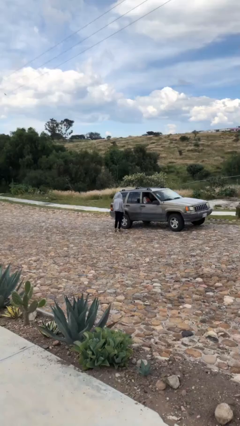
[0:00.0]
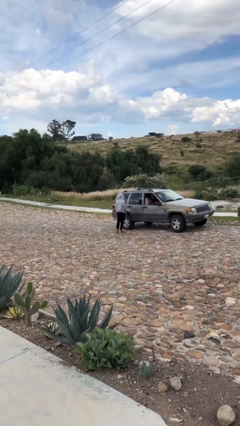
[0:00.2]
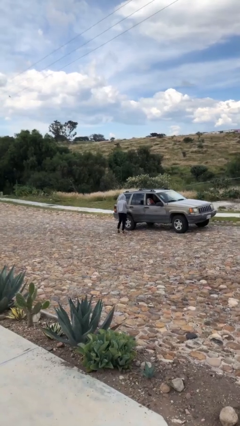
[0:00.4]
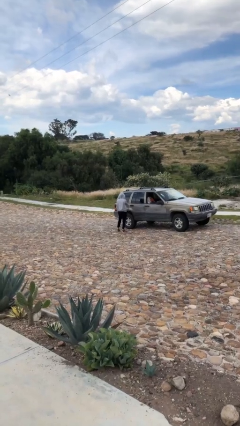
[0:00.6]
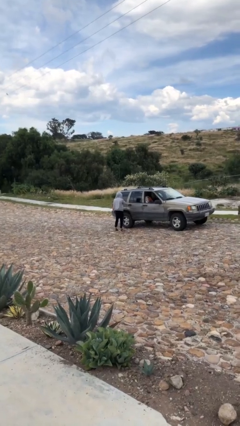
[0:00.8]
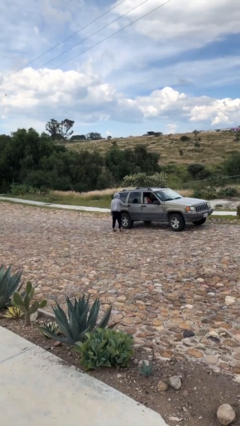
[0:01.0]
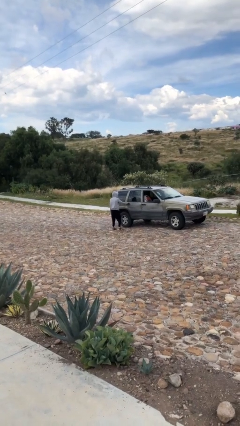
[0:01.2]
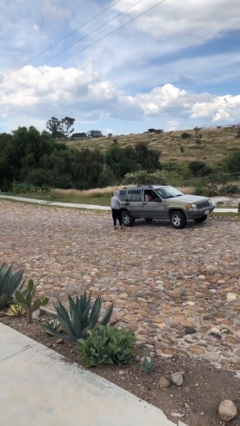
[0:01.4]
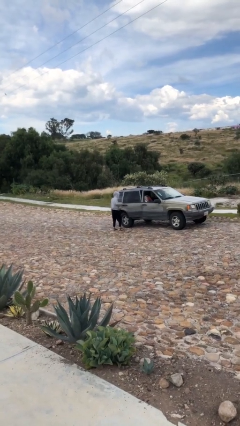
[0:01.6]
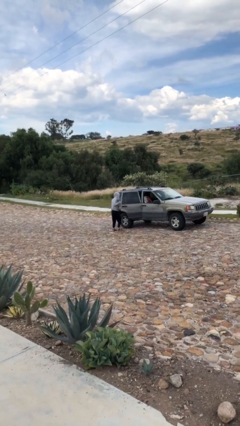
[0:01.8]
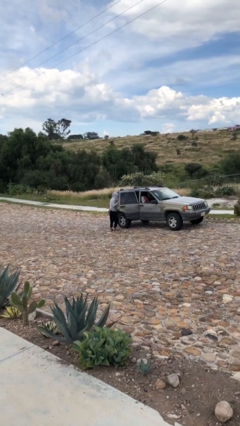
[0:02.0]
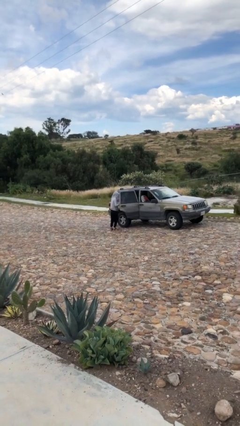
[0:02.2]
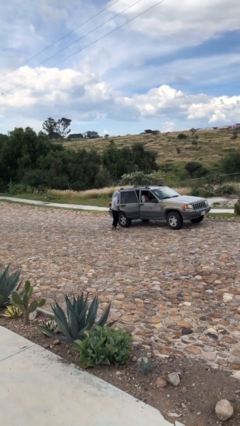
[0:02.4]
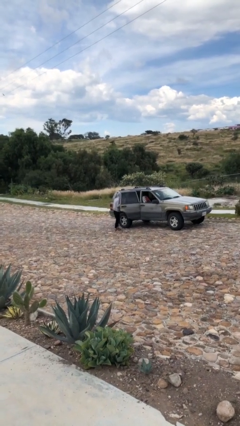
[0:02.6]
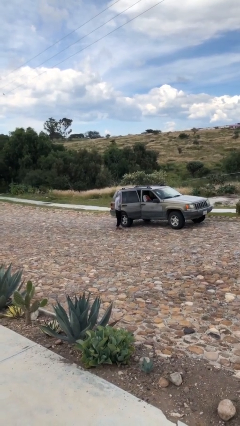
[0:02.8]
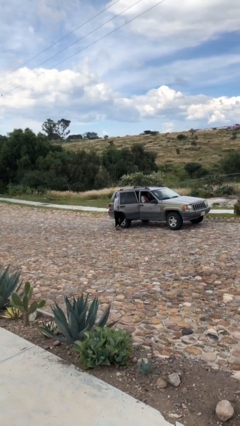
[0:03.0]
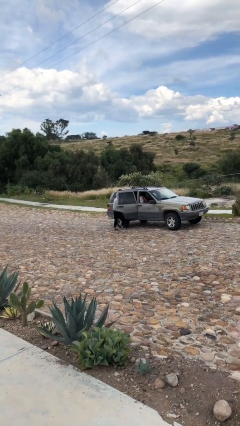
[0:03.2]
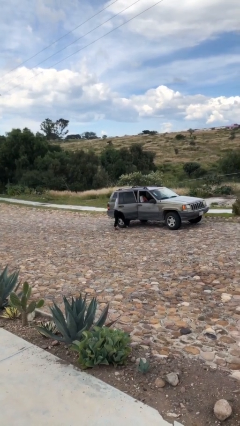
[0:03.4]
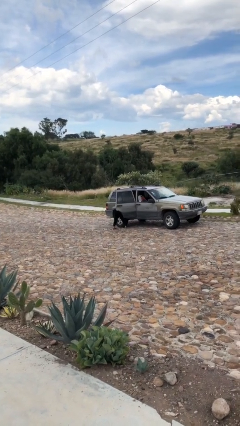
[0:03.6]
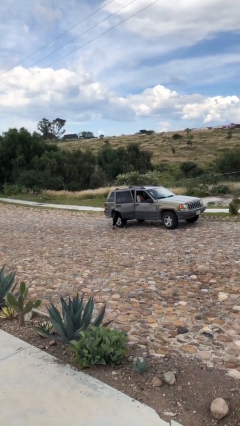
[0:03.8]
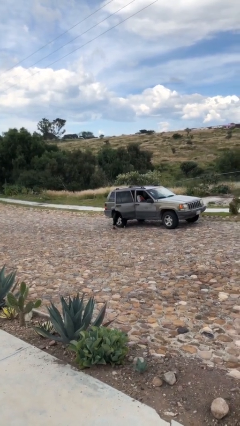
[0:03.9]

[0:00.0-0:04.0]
person opens car door

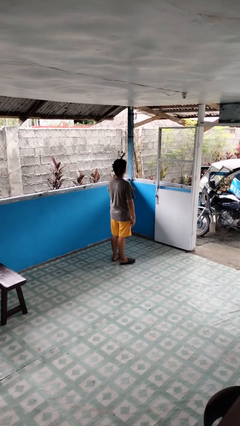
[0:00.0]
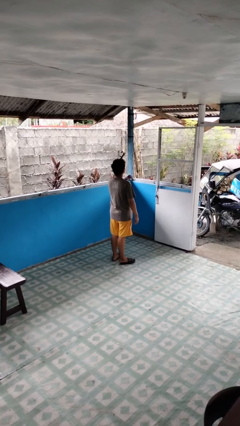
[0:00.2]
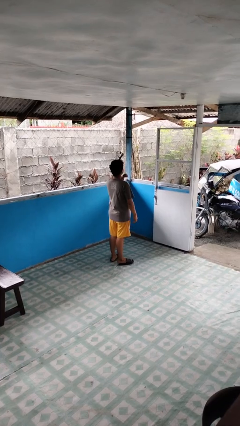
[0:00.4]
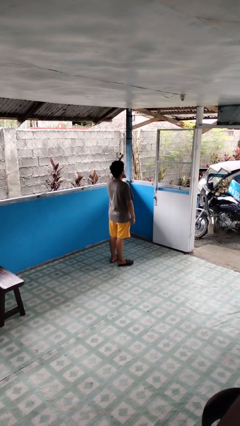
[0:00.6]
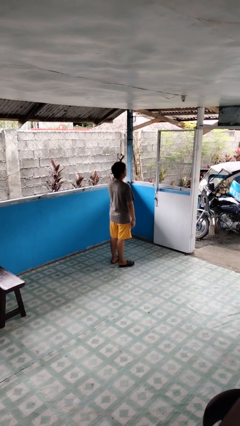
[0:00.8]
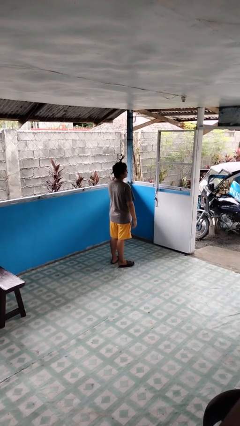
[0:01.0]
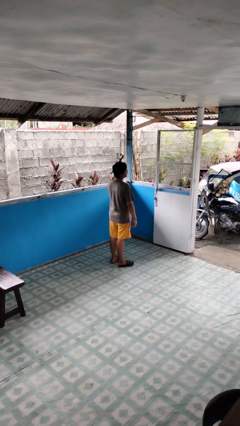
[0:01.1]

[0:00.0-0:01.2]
person gestures cut

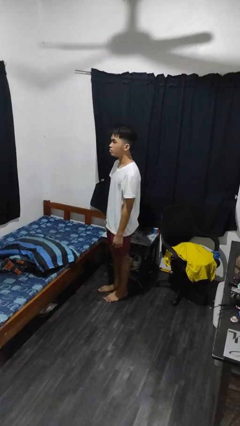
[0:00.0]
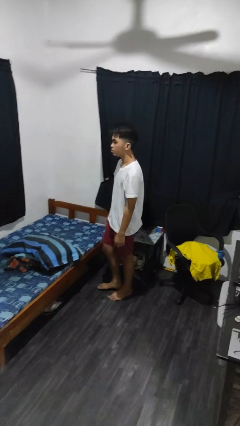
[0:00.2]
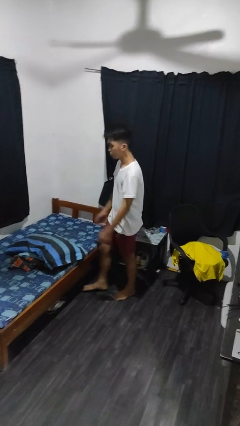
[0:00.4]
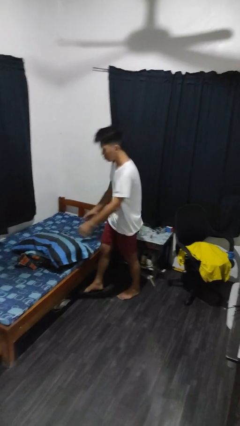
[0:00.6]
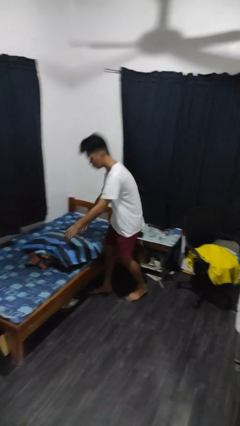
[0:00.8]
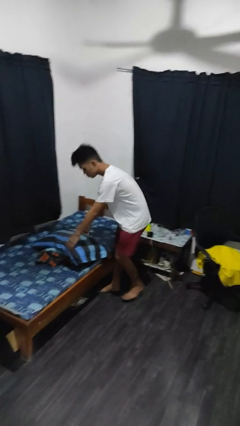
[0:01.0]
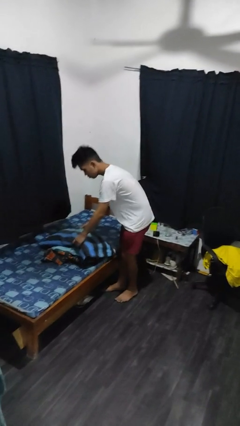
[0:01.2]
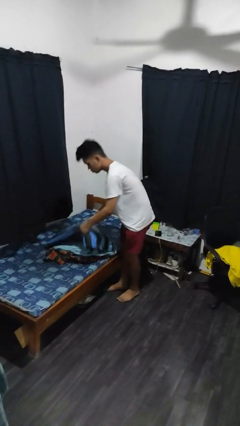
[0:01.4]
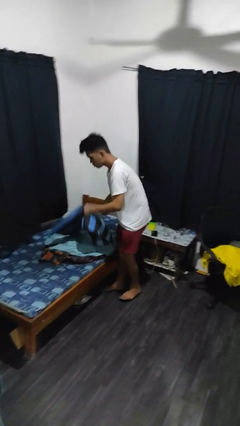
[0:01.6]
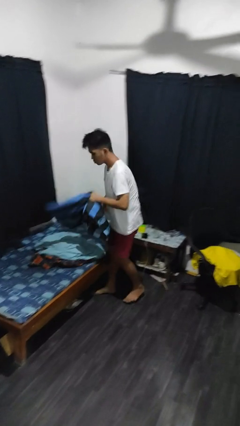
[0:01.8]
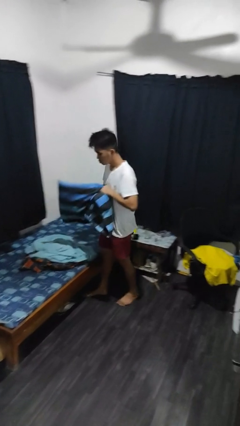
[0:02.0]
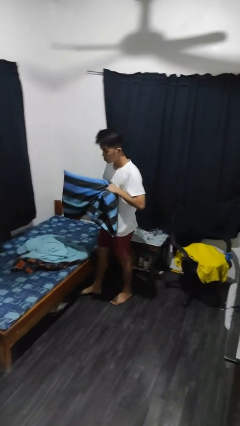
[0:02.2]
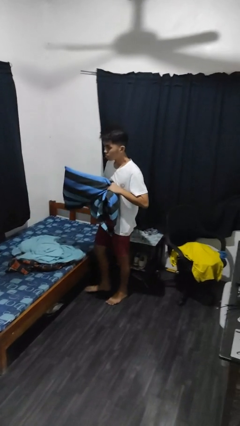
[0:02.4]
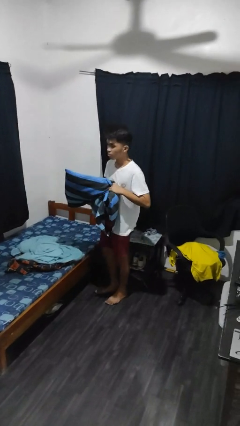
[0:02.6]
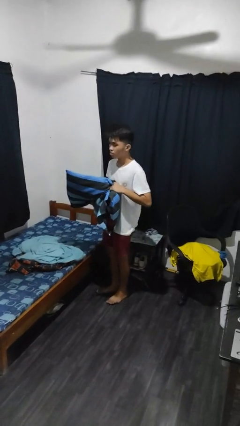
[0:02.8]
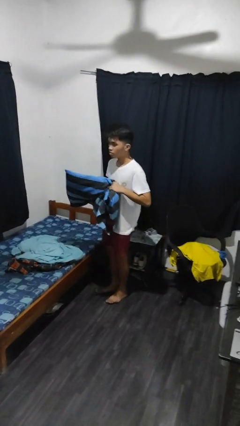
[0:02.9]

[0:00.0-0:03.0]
person picks up object from bed

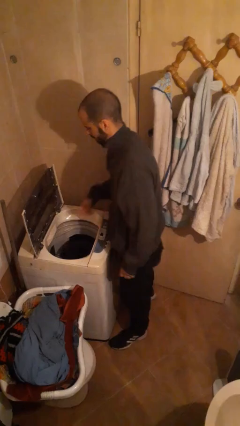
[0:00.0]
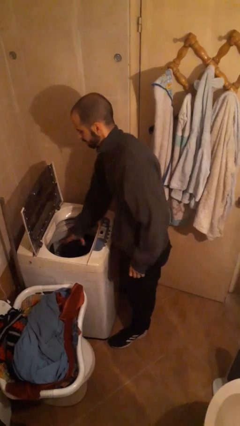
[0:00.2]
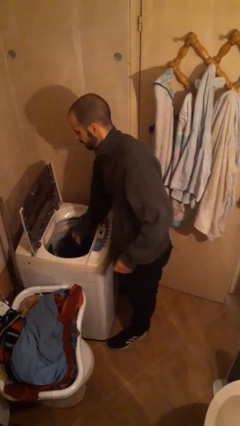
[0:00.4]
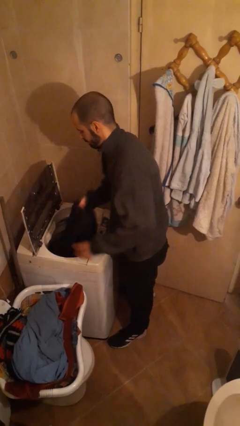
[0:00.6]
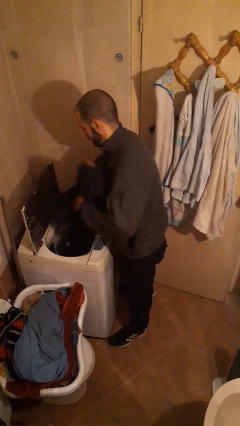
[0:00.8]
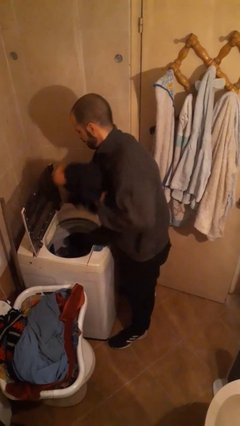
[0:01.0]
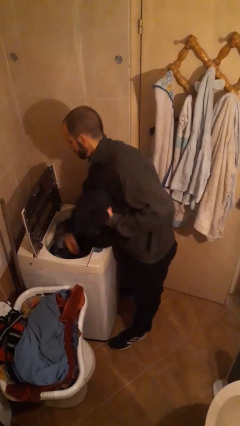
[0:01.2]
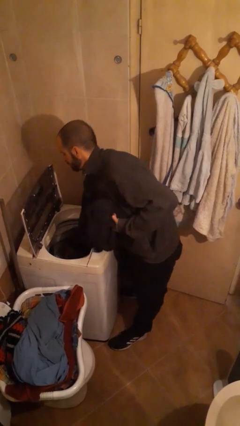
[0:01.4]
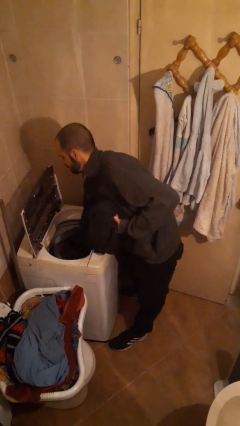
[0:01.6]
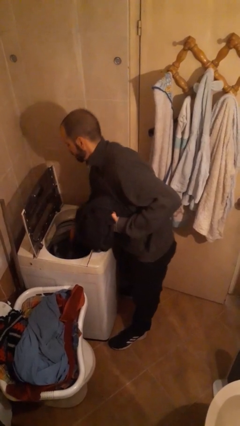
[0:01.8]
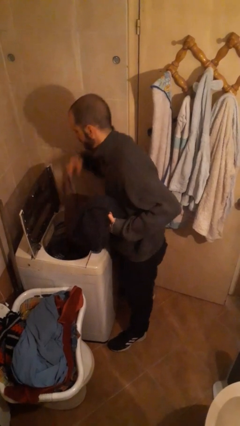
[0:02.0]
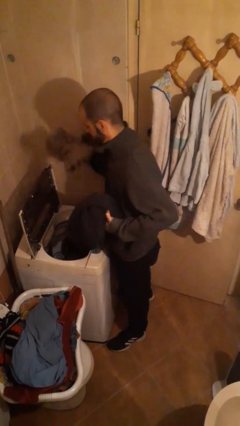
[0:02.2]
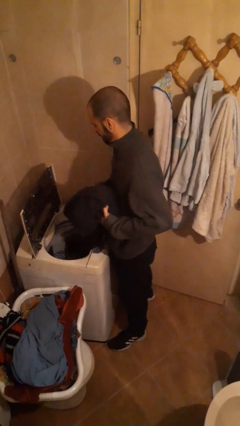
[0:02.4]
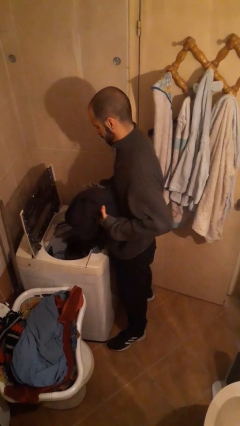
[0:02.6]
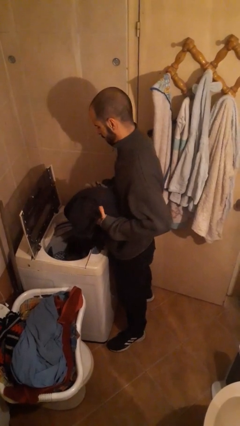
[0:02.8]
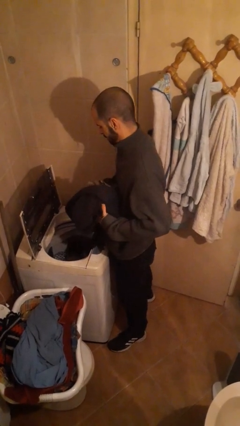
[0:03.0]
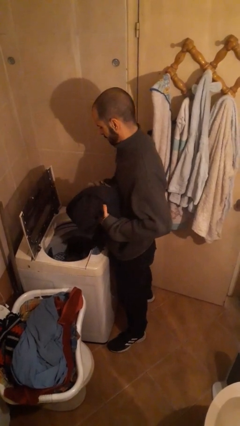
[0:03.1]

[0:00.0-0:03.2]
person loads clotheswasher

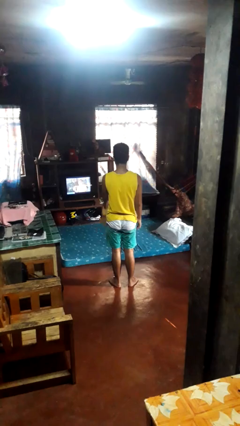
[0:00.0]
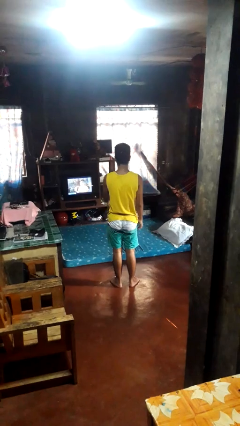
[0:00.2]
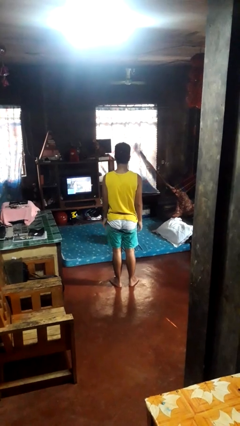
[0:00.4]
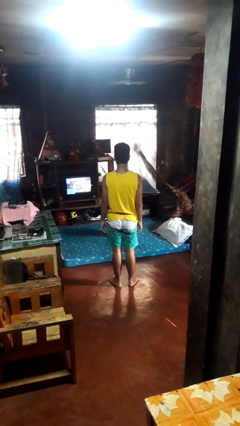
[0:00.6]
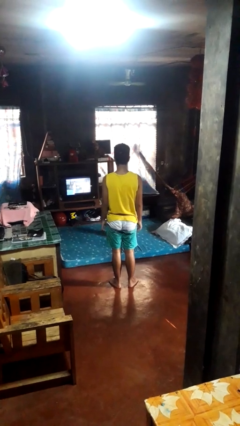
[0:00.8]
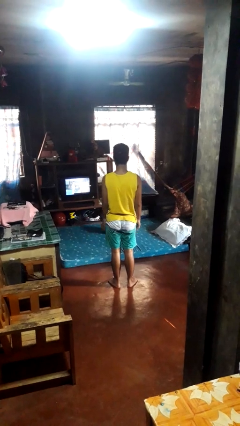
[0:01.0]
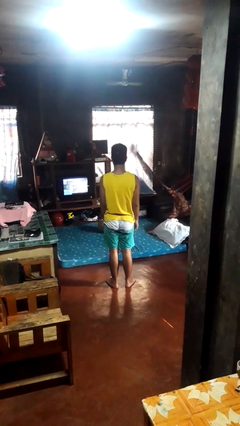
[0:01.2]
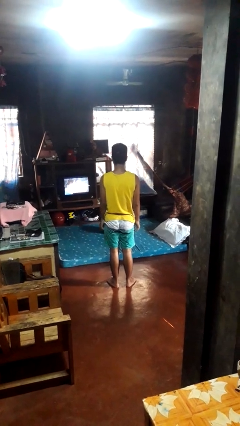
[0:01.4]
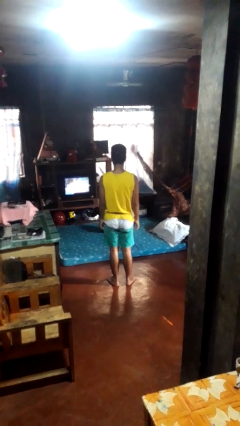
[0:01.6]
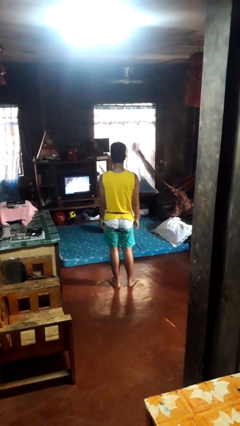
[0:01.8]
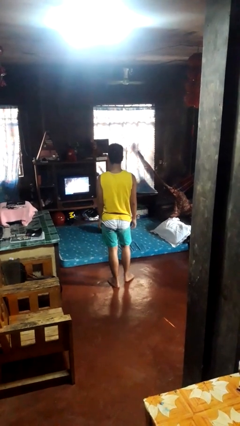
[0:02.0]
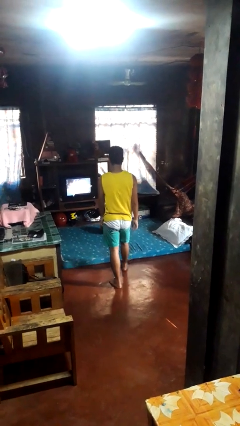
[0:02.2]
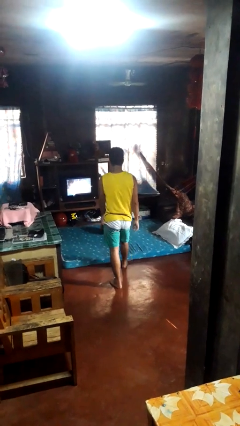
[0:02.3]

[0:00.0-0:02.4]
person throws object on bed

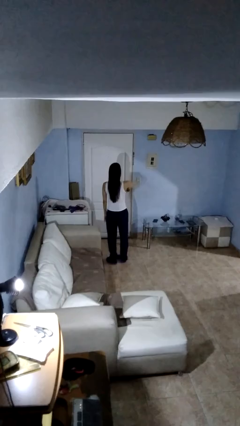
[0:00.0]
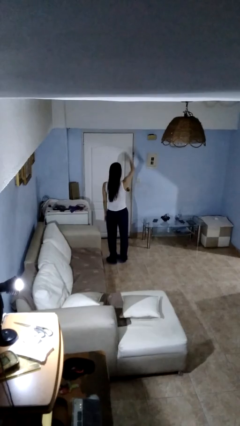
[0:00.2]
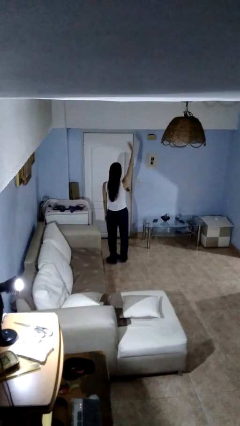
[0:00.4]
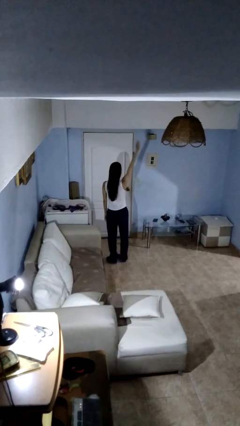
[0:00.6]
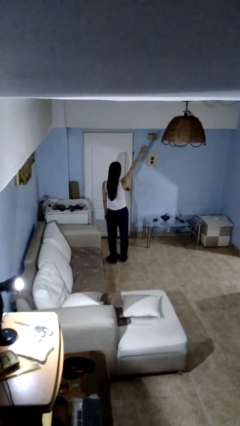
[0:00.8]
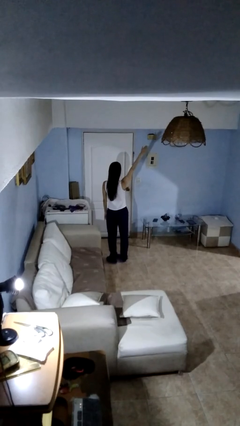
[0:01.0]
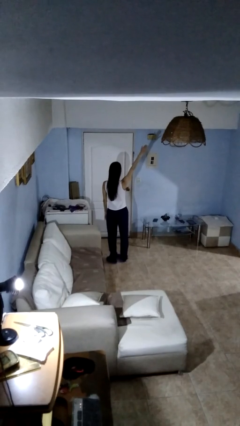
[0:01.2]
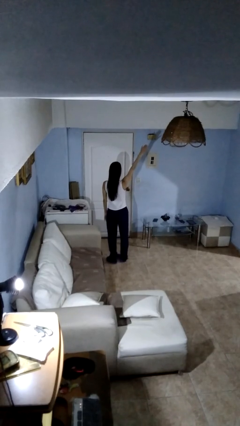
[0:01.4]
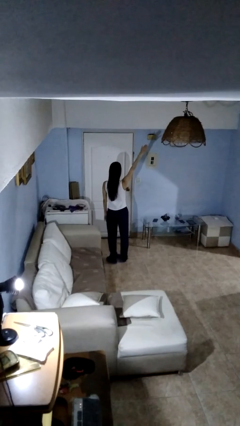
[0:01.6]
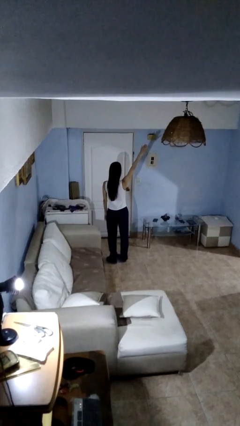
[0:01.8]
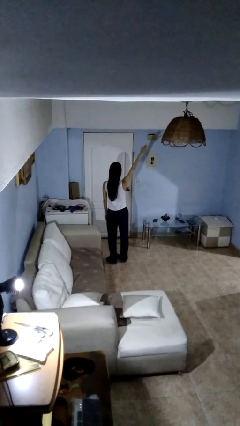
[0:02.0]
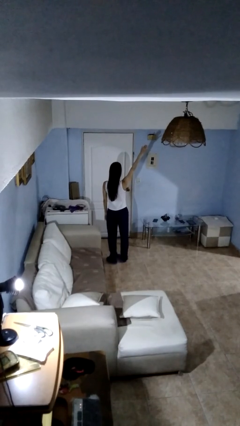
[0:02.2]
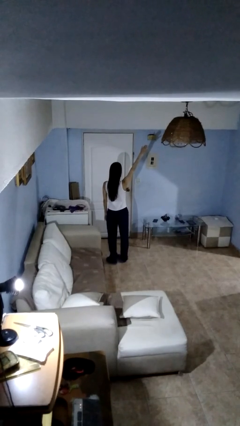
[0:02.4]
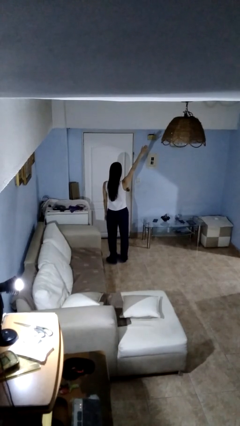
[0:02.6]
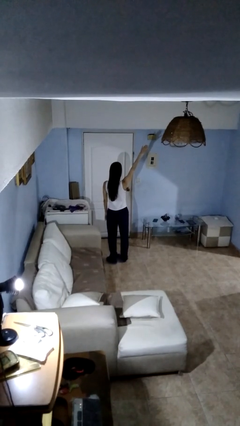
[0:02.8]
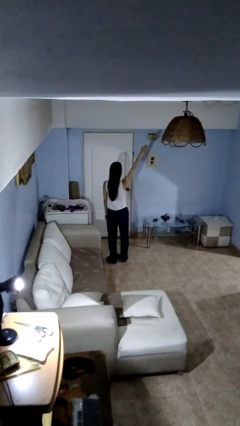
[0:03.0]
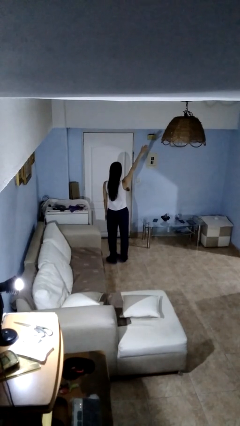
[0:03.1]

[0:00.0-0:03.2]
person gestures swipe up

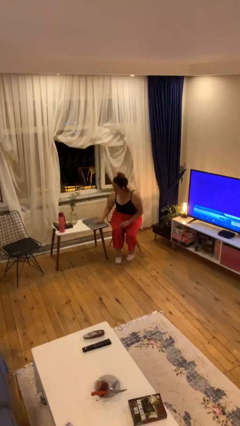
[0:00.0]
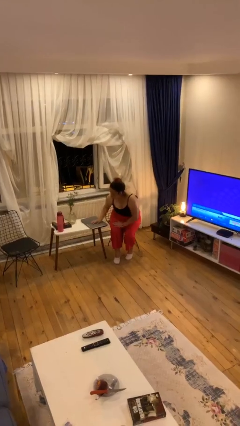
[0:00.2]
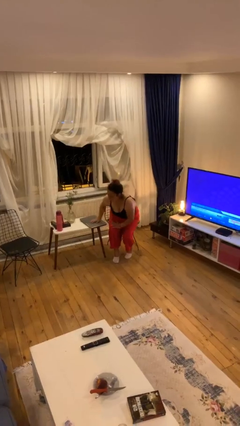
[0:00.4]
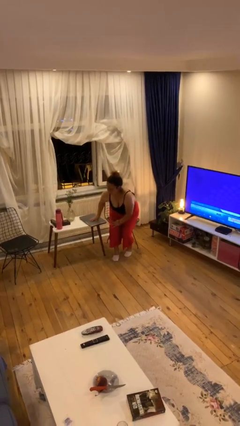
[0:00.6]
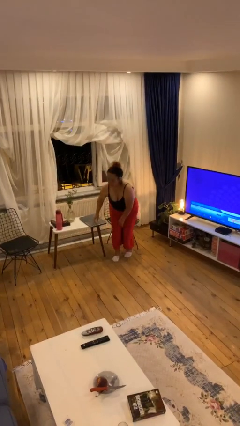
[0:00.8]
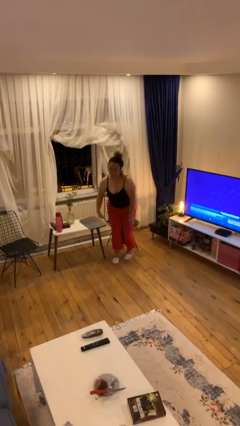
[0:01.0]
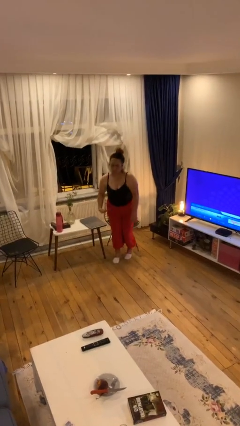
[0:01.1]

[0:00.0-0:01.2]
person stands up
